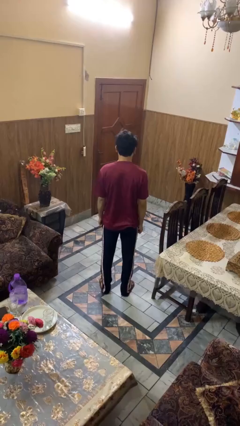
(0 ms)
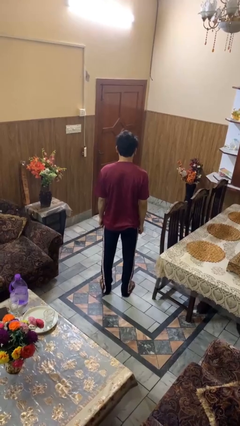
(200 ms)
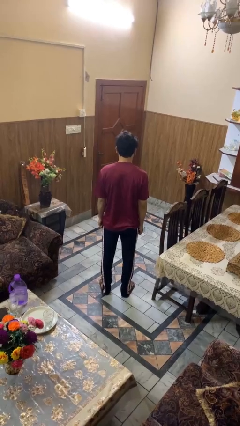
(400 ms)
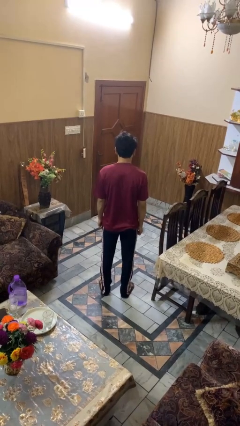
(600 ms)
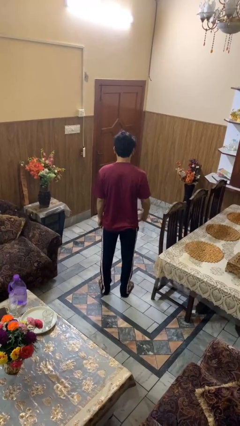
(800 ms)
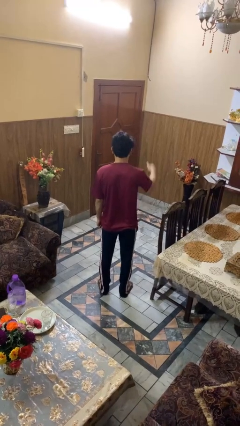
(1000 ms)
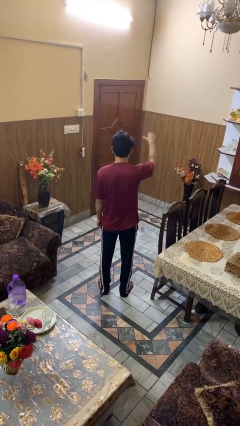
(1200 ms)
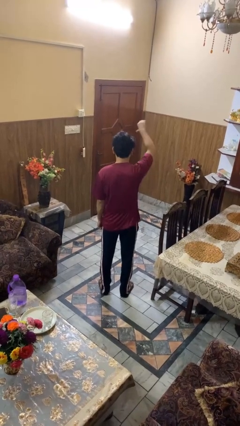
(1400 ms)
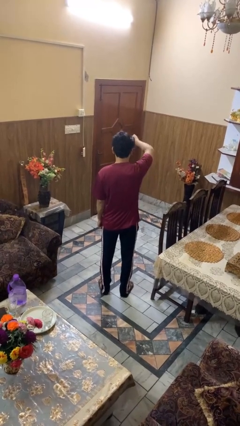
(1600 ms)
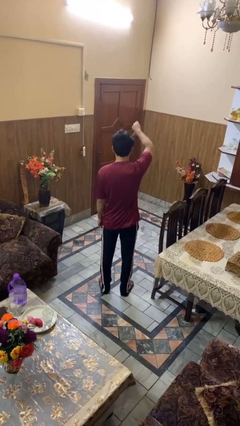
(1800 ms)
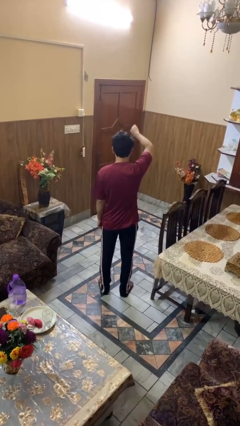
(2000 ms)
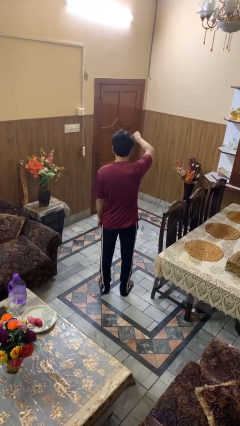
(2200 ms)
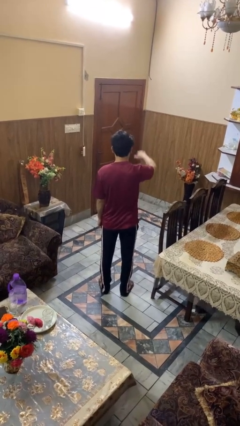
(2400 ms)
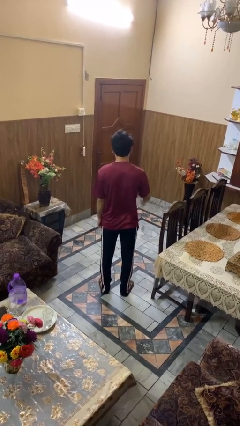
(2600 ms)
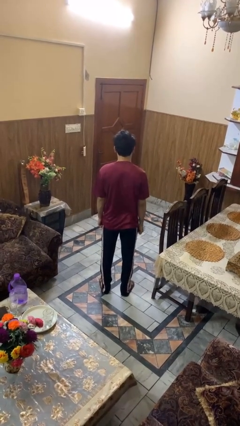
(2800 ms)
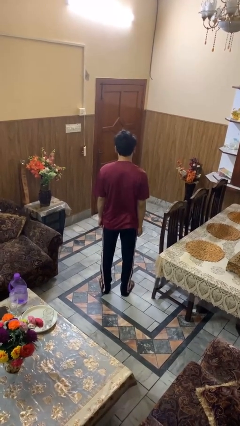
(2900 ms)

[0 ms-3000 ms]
person gestures thumbs down

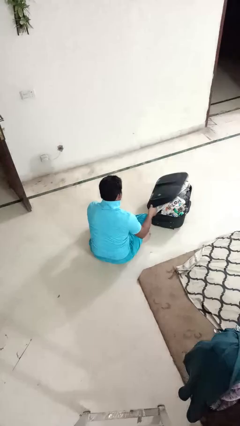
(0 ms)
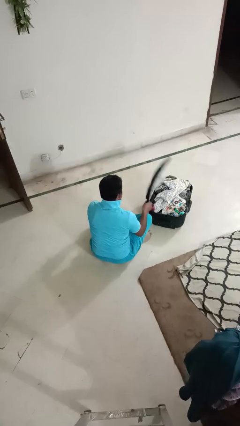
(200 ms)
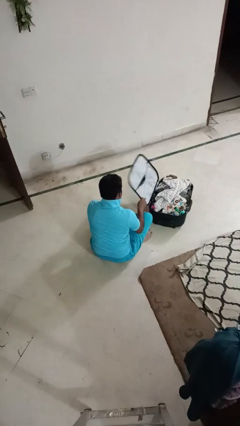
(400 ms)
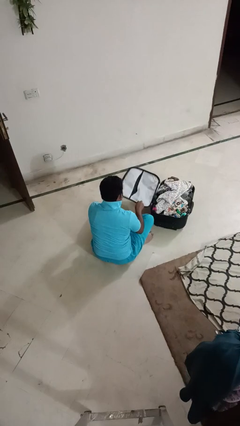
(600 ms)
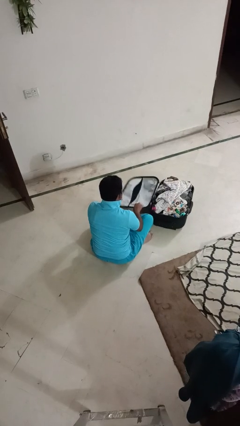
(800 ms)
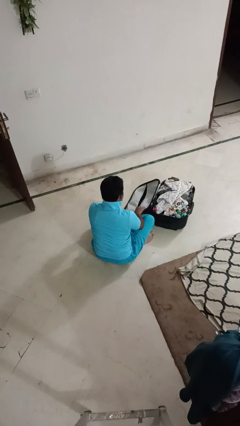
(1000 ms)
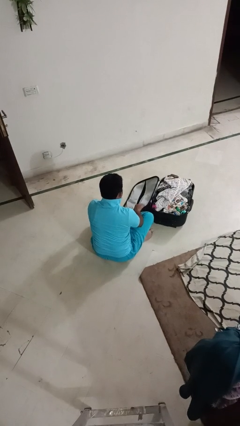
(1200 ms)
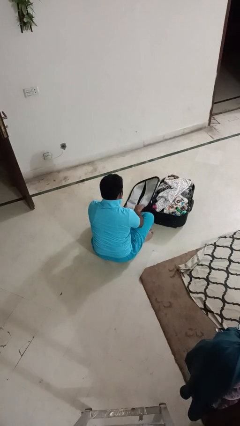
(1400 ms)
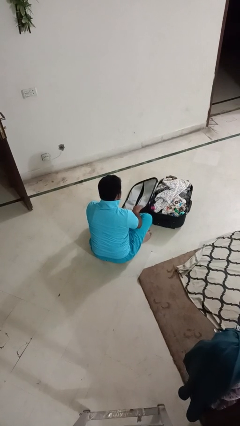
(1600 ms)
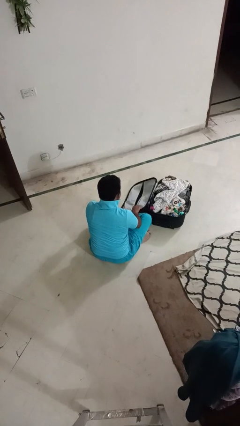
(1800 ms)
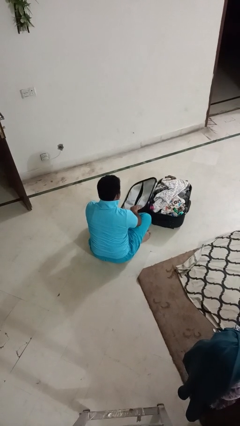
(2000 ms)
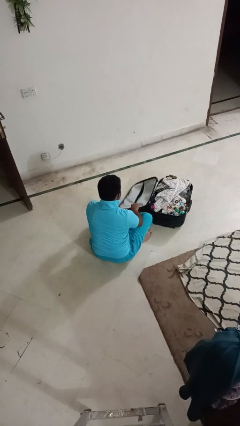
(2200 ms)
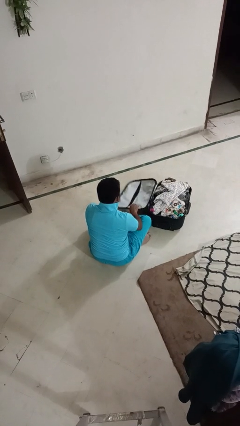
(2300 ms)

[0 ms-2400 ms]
person opens suitcase

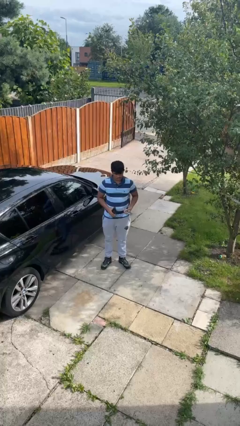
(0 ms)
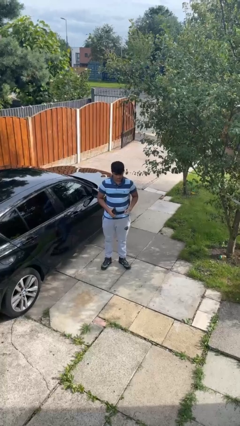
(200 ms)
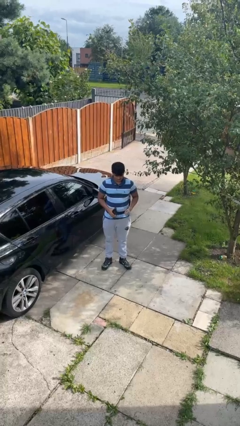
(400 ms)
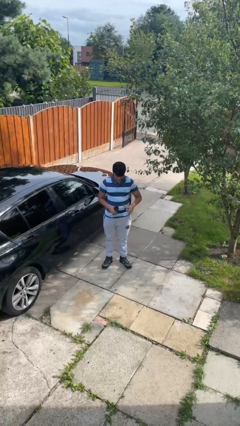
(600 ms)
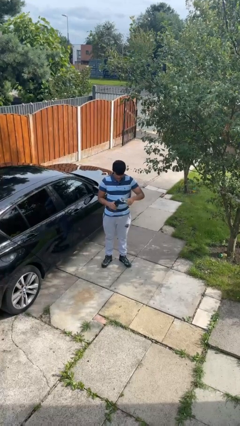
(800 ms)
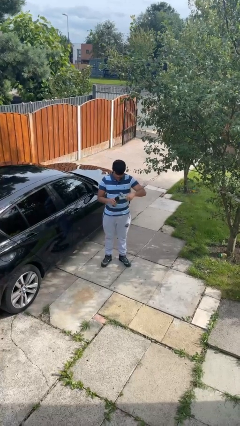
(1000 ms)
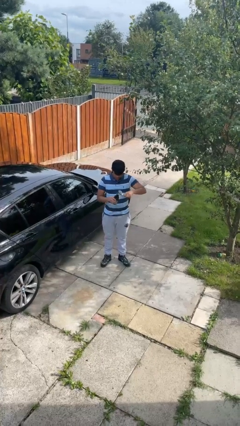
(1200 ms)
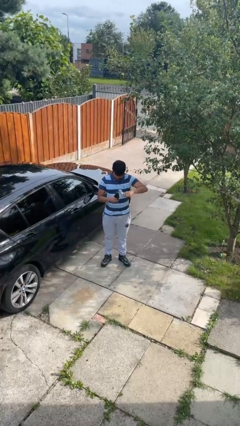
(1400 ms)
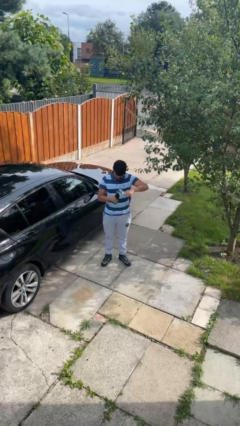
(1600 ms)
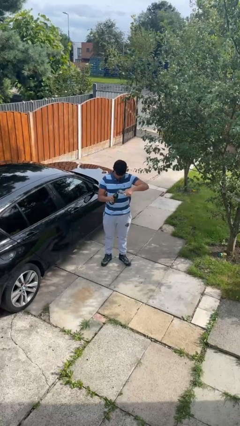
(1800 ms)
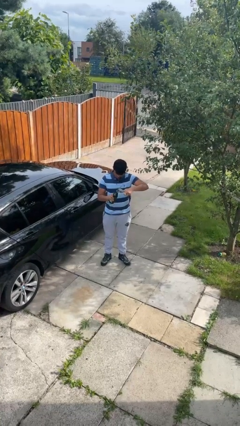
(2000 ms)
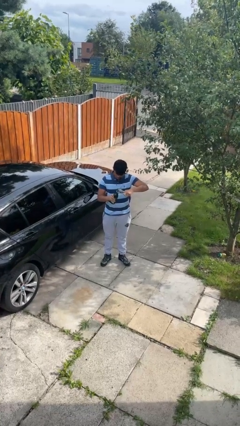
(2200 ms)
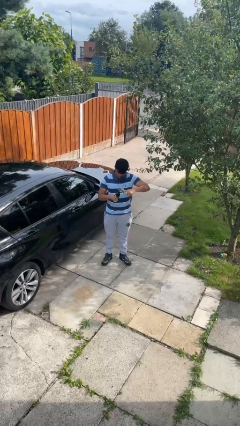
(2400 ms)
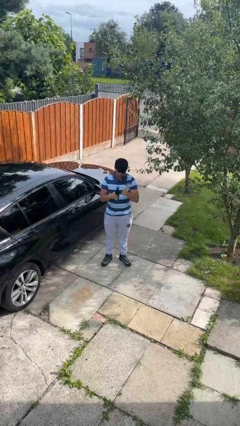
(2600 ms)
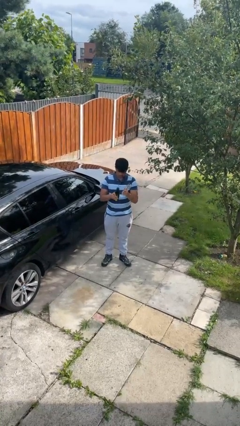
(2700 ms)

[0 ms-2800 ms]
person opens can with can opener

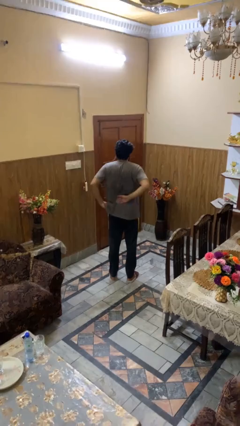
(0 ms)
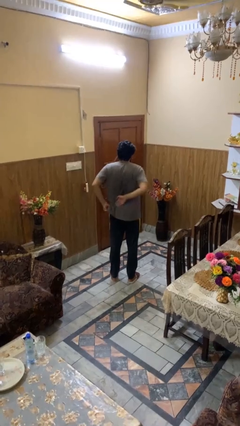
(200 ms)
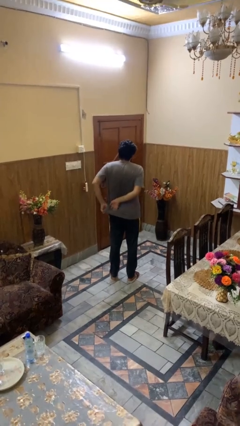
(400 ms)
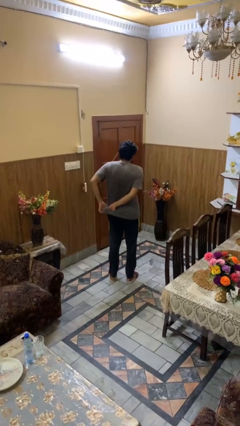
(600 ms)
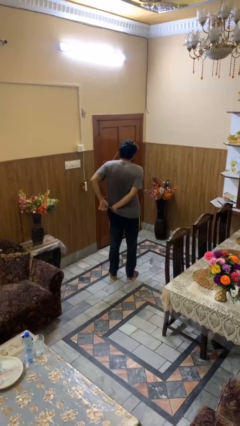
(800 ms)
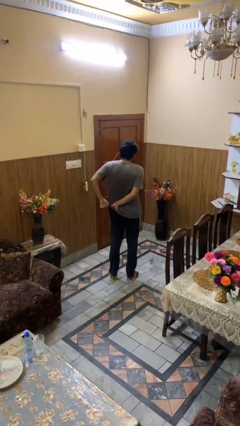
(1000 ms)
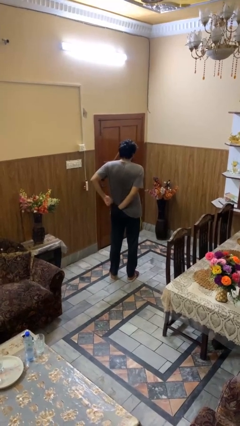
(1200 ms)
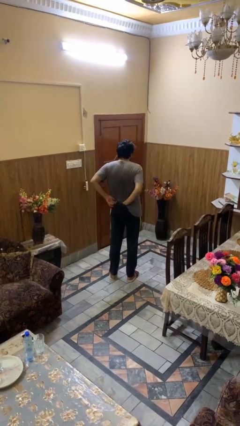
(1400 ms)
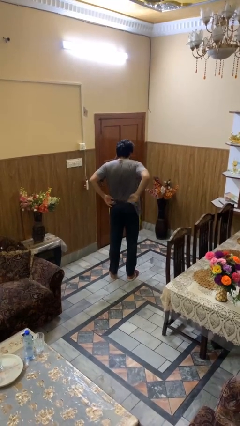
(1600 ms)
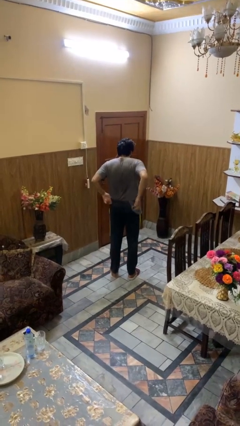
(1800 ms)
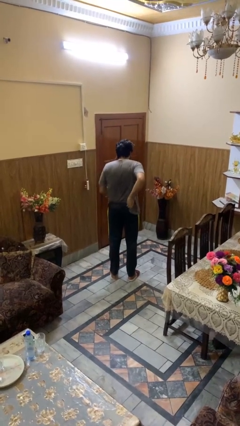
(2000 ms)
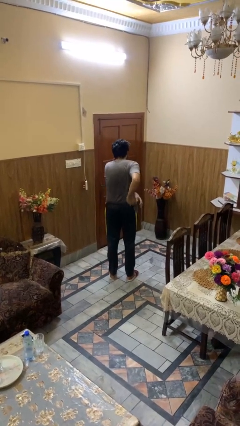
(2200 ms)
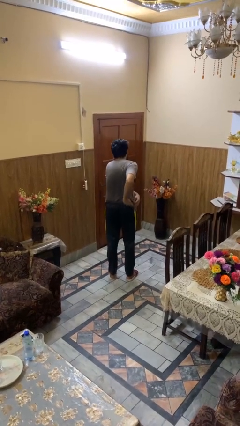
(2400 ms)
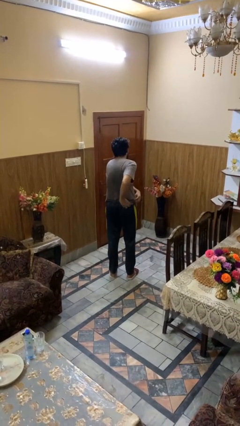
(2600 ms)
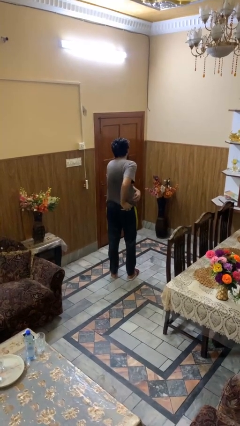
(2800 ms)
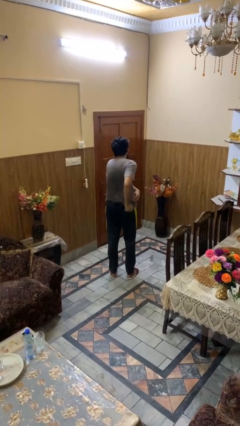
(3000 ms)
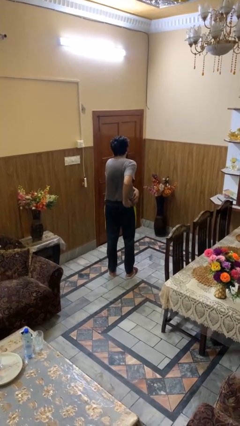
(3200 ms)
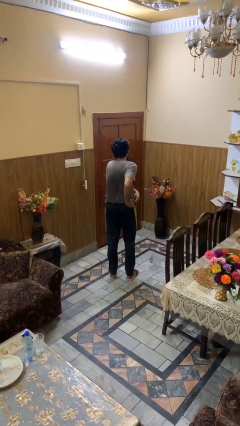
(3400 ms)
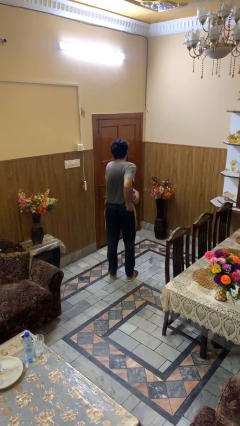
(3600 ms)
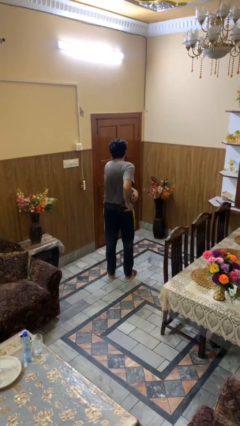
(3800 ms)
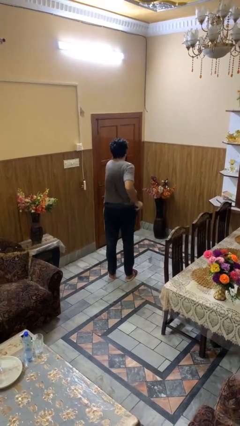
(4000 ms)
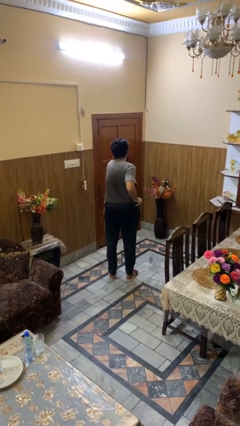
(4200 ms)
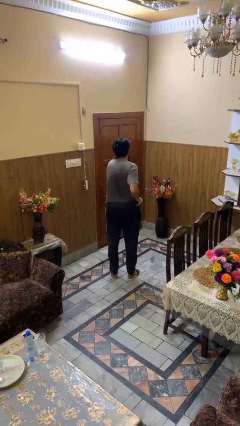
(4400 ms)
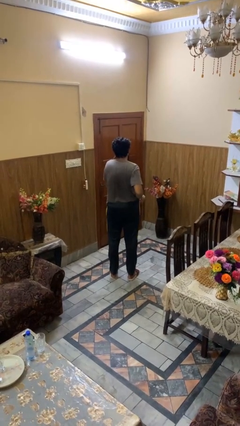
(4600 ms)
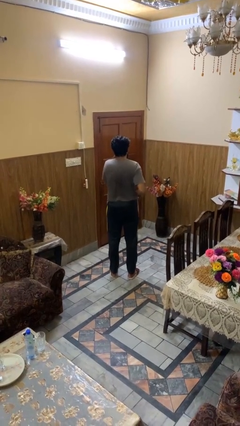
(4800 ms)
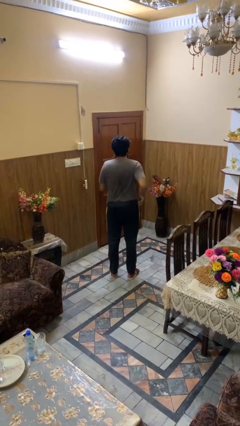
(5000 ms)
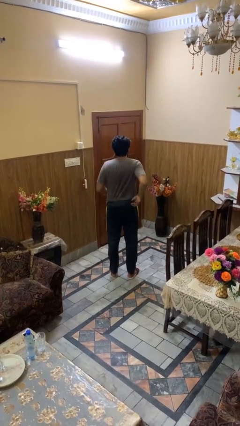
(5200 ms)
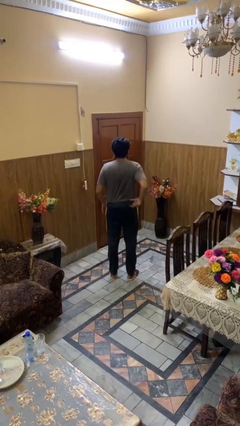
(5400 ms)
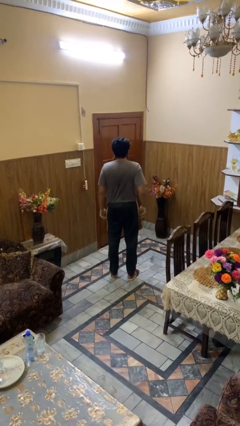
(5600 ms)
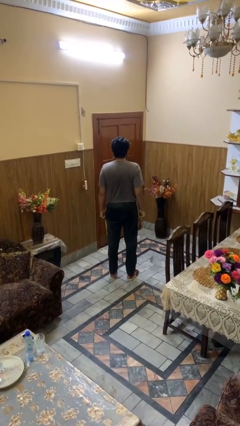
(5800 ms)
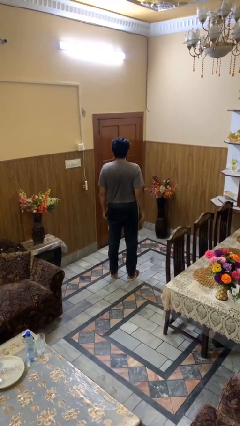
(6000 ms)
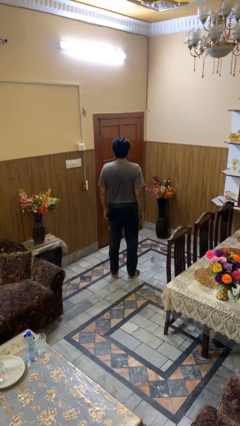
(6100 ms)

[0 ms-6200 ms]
person tucks in shirt

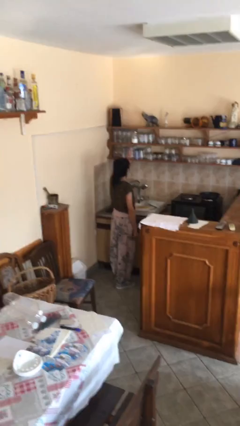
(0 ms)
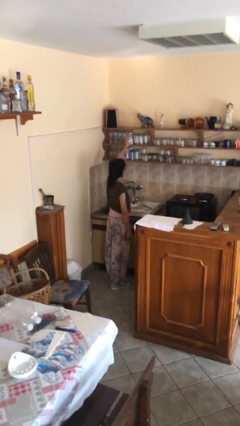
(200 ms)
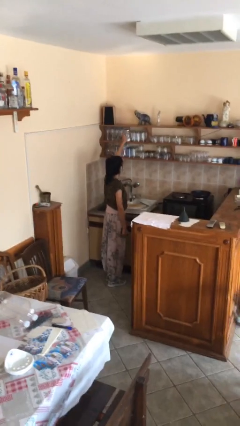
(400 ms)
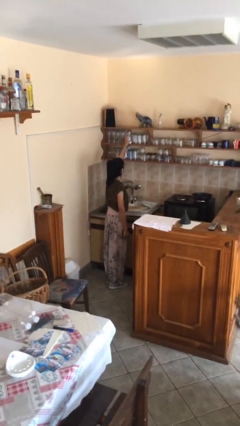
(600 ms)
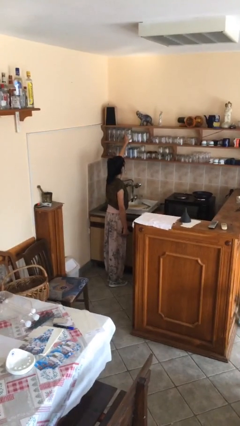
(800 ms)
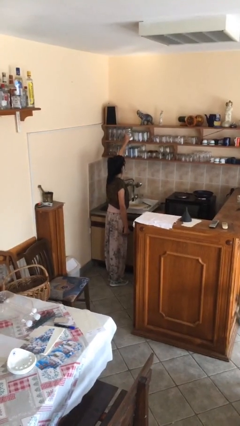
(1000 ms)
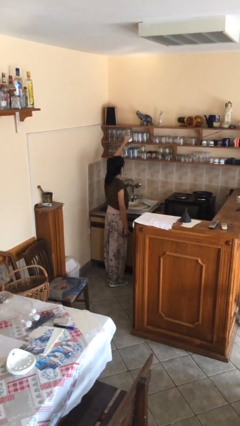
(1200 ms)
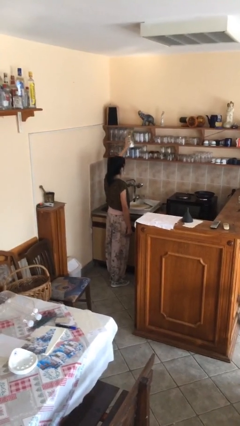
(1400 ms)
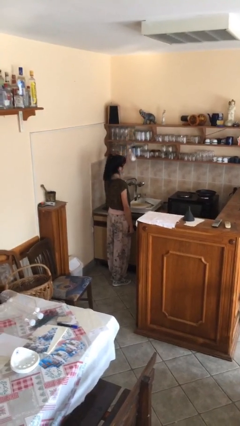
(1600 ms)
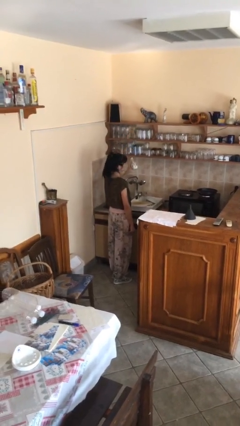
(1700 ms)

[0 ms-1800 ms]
person picks up object from shelf

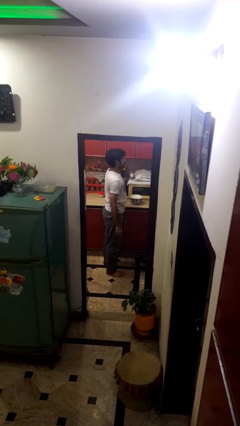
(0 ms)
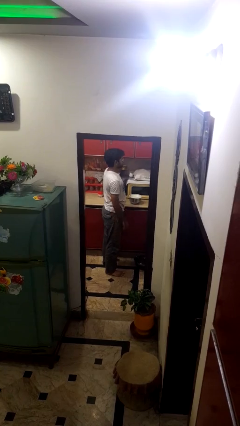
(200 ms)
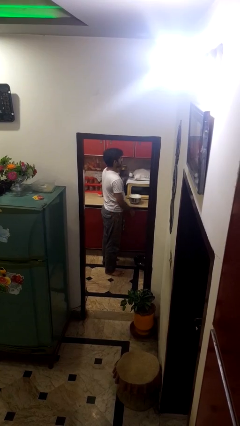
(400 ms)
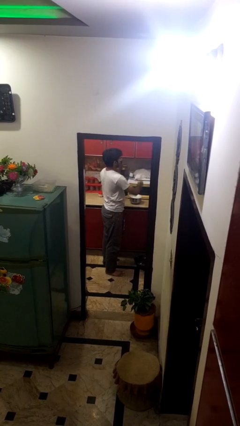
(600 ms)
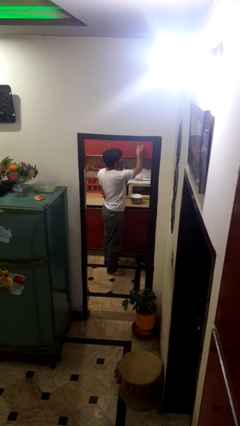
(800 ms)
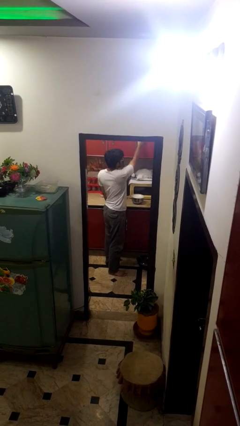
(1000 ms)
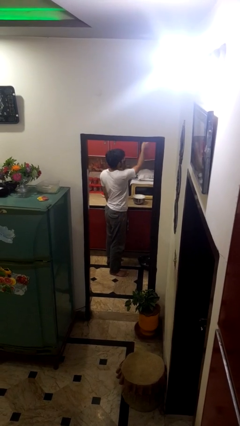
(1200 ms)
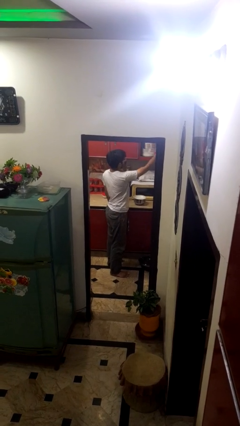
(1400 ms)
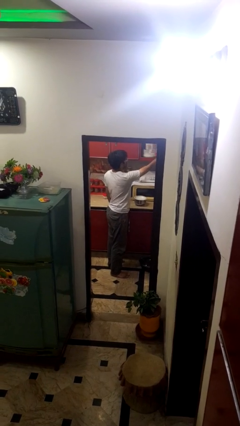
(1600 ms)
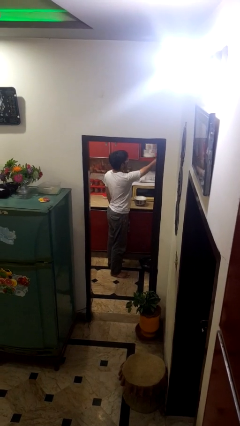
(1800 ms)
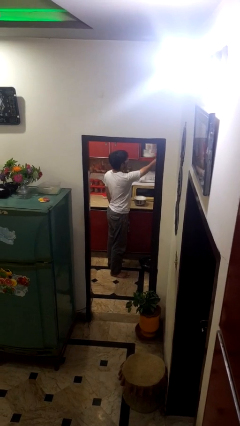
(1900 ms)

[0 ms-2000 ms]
person opens cabinet
